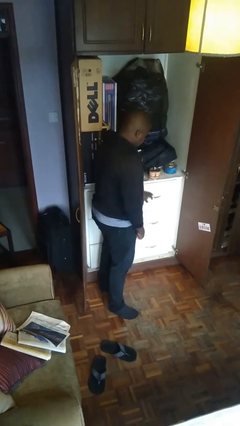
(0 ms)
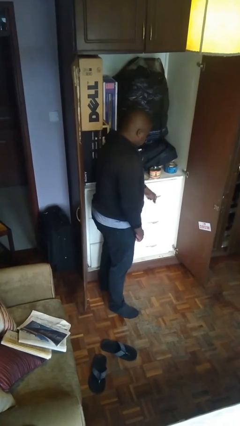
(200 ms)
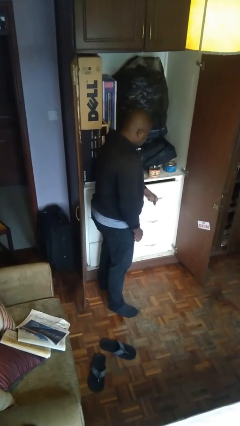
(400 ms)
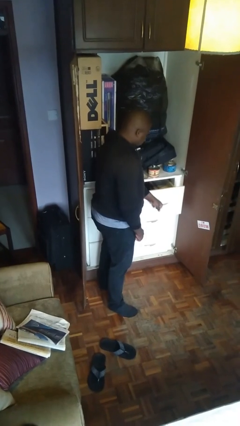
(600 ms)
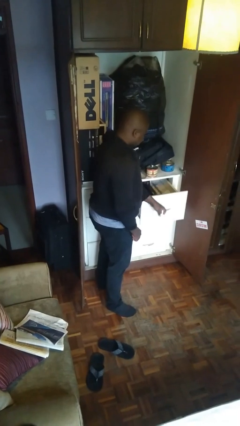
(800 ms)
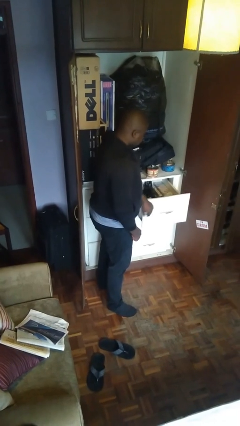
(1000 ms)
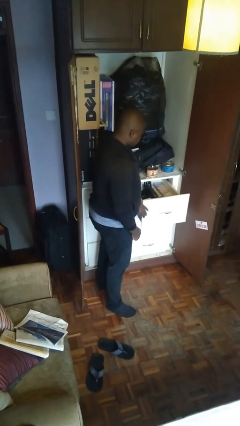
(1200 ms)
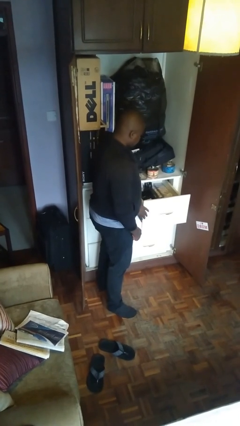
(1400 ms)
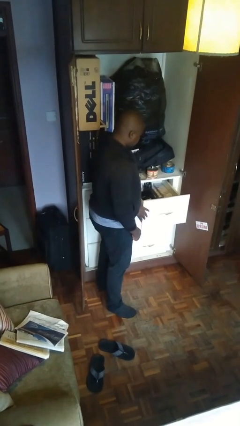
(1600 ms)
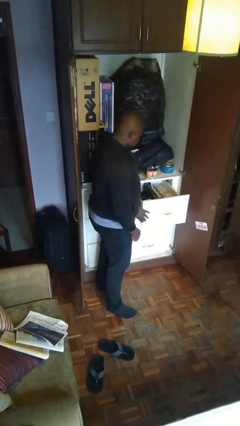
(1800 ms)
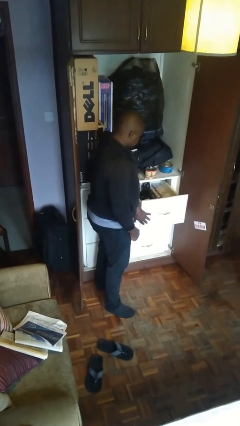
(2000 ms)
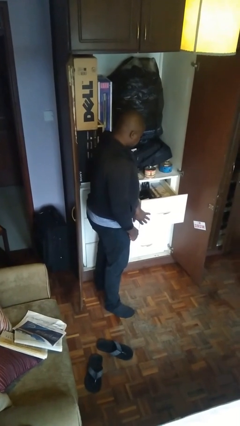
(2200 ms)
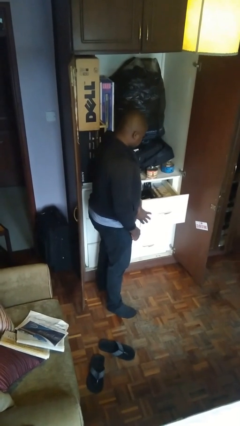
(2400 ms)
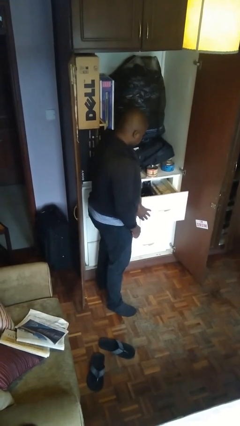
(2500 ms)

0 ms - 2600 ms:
person opens dresser drawer

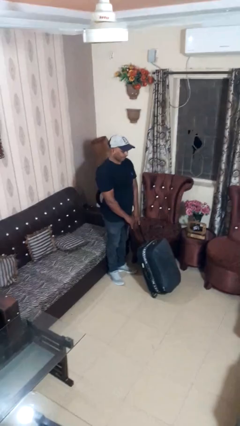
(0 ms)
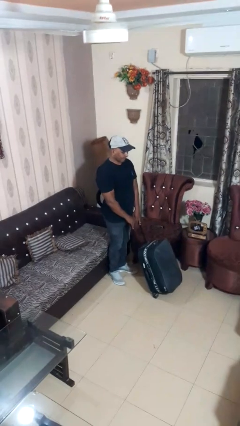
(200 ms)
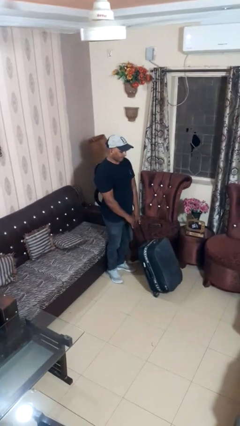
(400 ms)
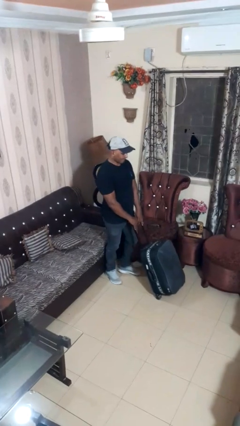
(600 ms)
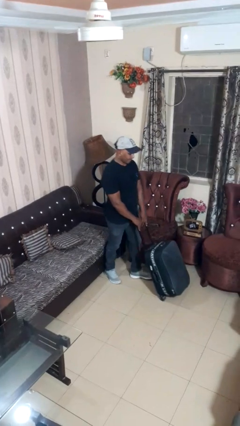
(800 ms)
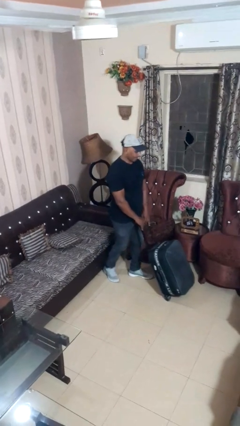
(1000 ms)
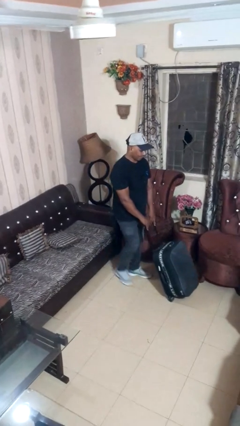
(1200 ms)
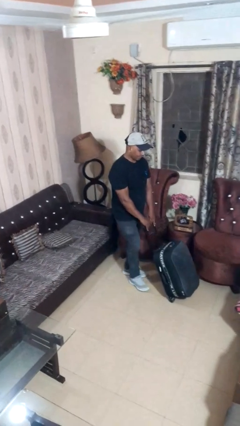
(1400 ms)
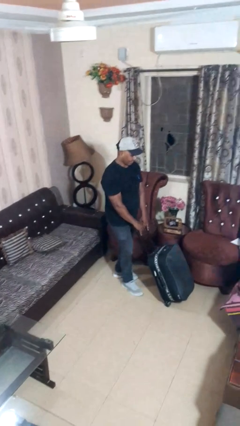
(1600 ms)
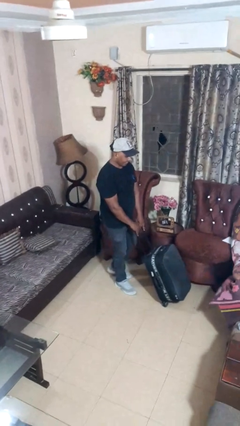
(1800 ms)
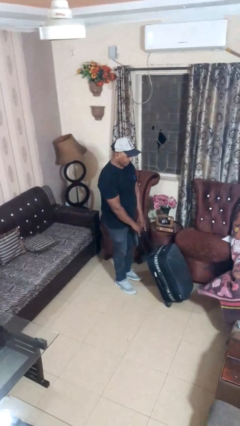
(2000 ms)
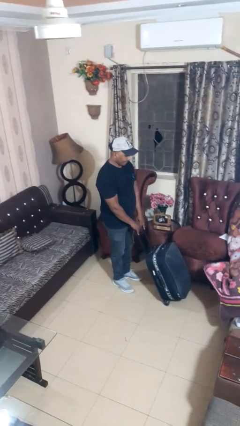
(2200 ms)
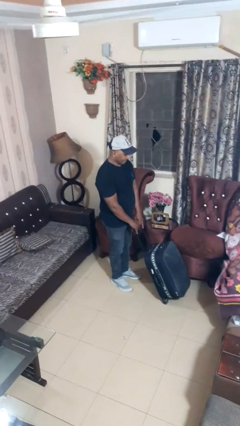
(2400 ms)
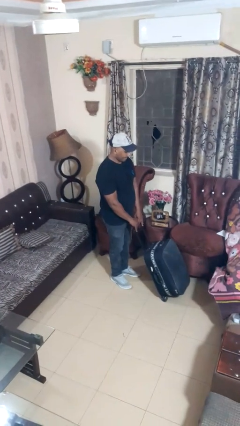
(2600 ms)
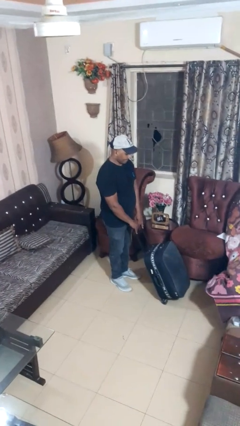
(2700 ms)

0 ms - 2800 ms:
person pushes wheeled cart

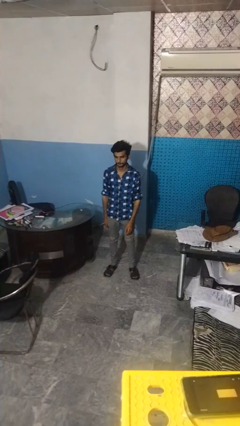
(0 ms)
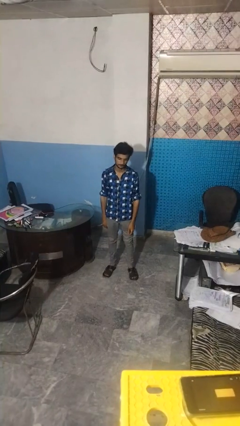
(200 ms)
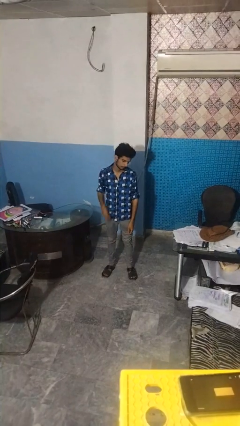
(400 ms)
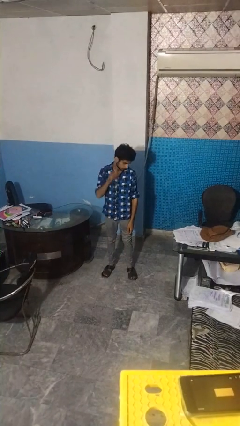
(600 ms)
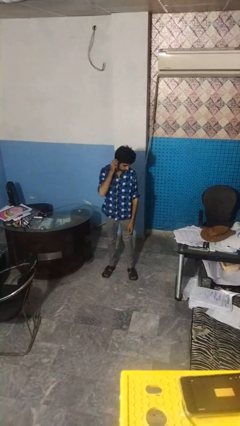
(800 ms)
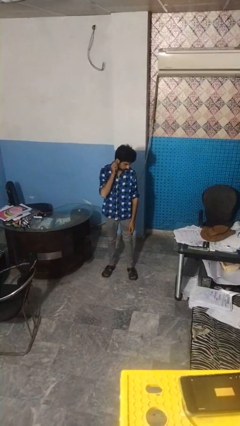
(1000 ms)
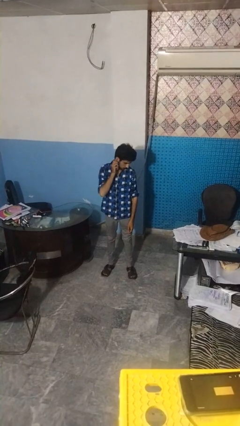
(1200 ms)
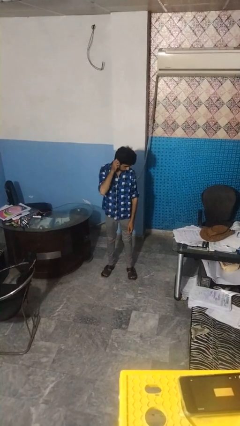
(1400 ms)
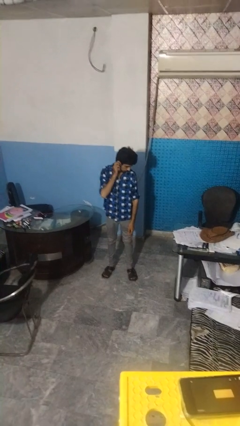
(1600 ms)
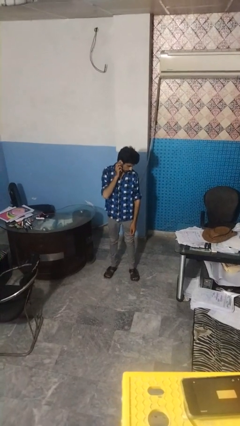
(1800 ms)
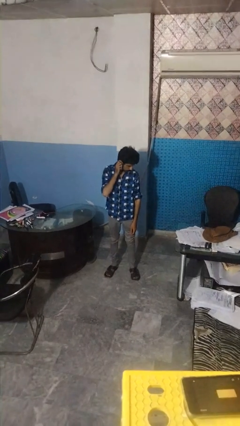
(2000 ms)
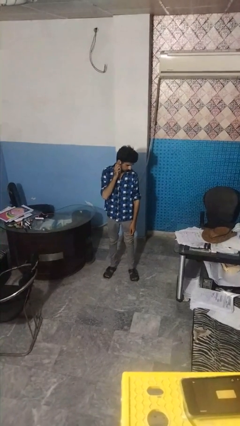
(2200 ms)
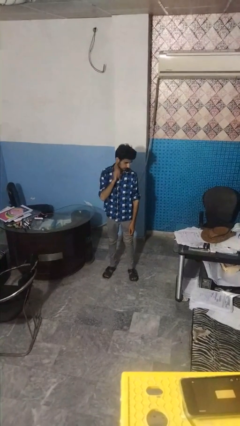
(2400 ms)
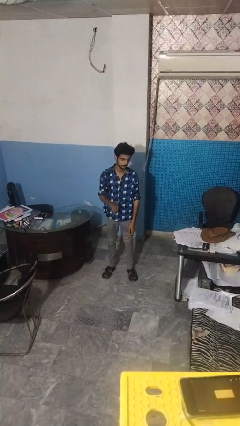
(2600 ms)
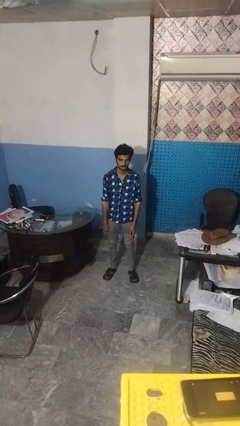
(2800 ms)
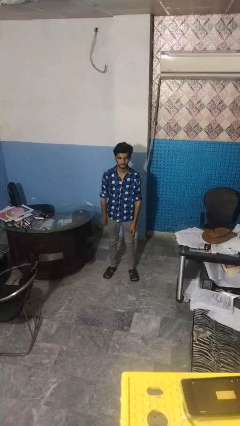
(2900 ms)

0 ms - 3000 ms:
person touches earlobe

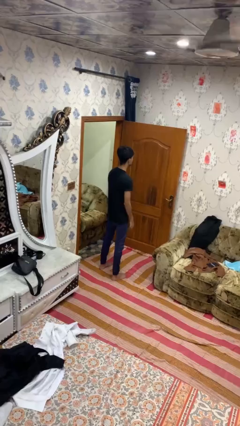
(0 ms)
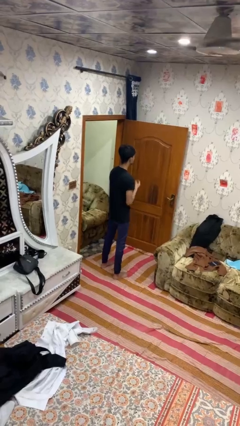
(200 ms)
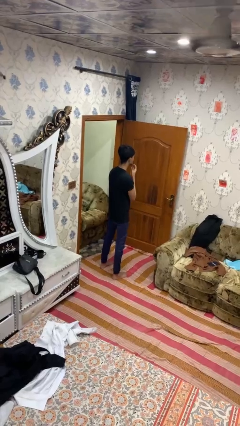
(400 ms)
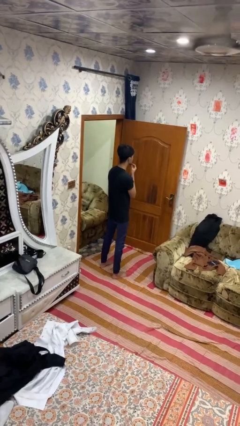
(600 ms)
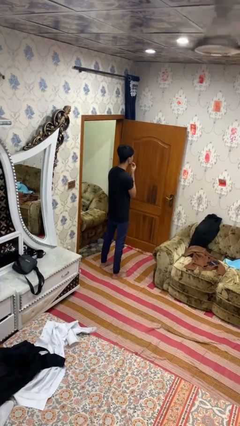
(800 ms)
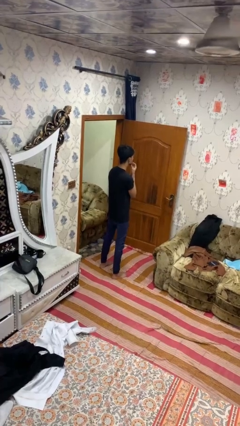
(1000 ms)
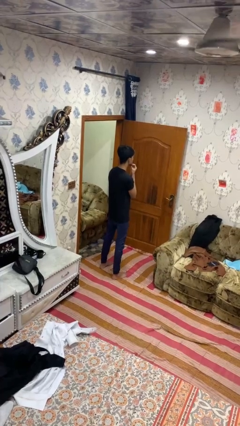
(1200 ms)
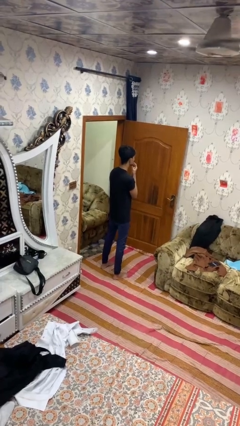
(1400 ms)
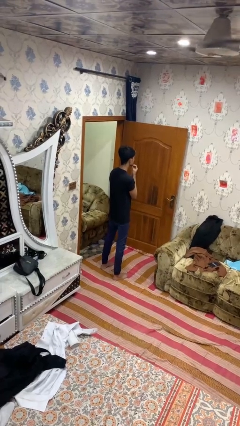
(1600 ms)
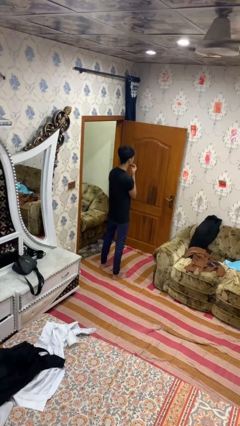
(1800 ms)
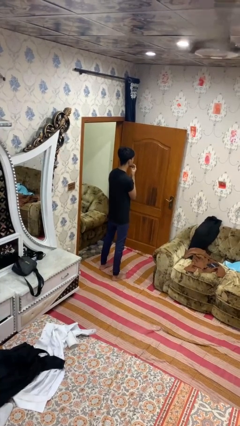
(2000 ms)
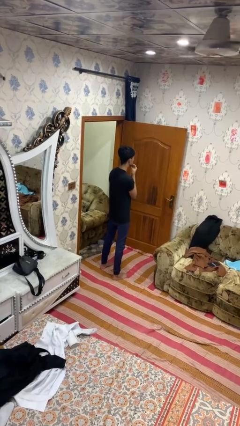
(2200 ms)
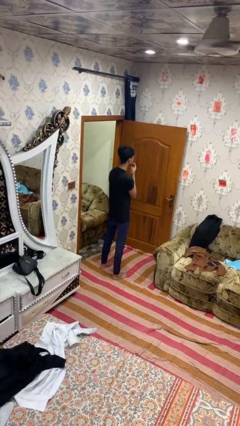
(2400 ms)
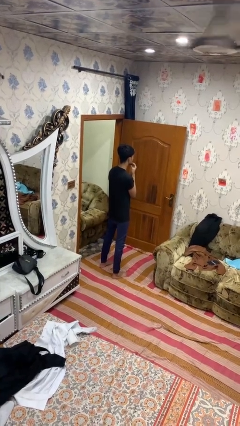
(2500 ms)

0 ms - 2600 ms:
person strokes chin

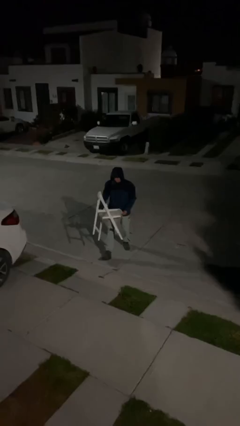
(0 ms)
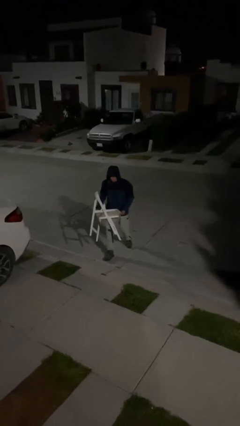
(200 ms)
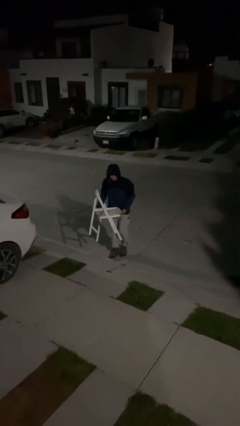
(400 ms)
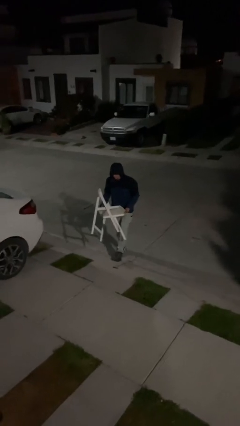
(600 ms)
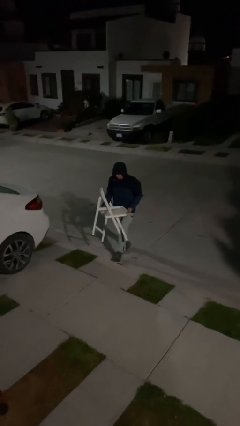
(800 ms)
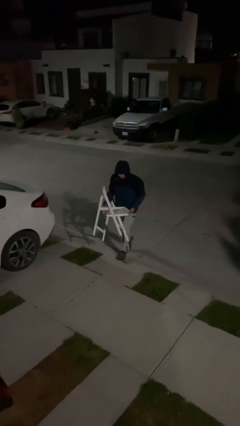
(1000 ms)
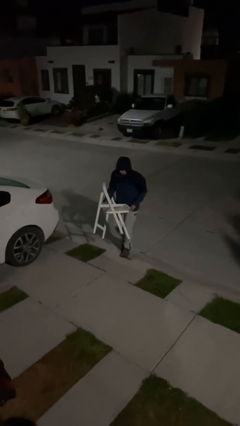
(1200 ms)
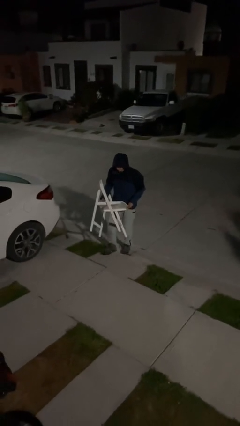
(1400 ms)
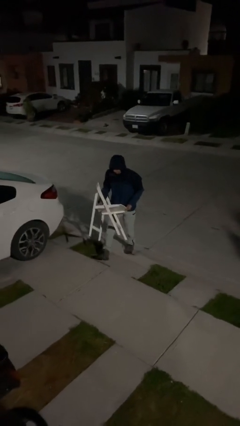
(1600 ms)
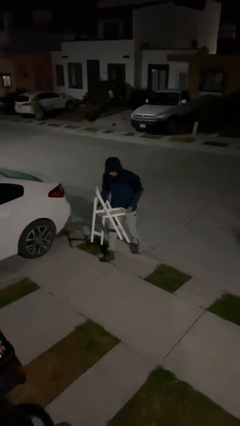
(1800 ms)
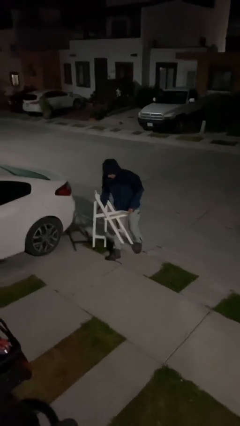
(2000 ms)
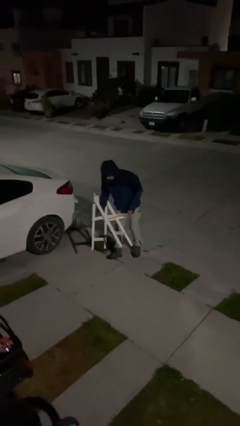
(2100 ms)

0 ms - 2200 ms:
person carries heavy object

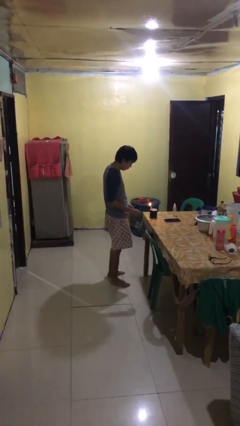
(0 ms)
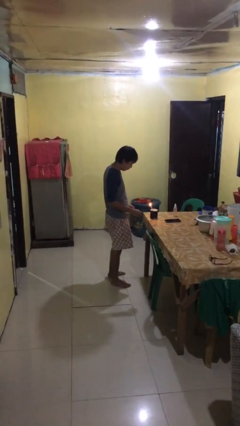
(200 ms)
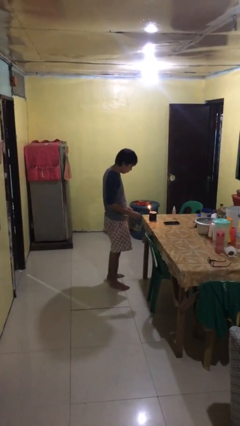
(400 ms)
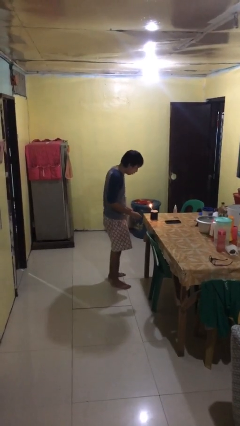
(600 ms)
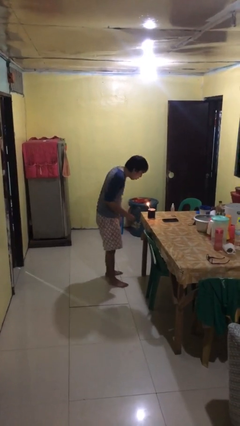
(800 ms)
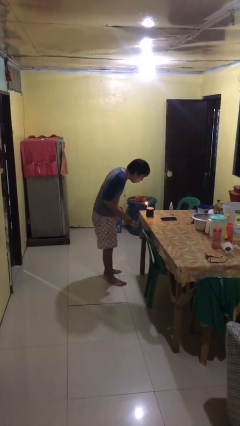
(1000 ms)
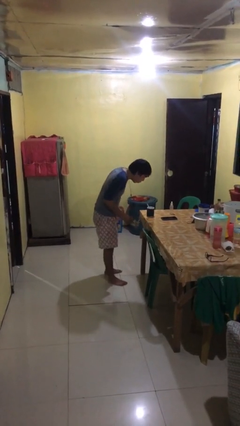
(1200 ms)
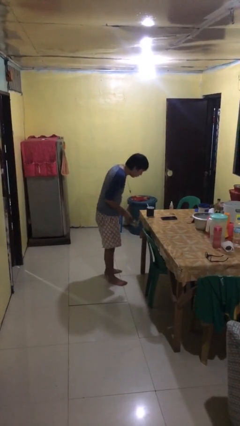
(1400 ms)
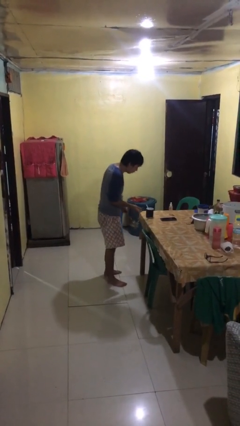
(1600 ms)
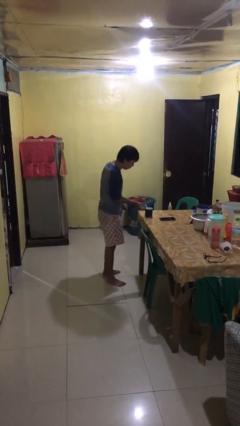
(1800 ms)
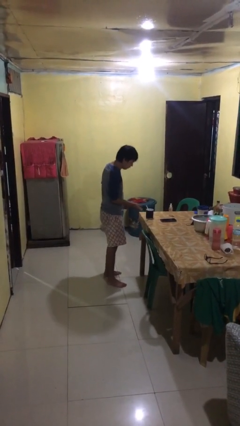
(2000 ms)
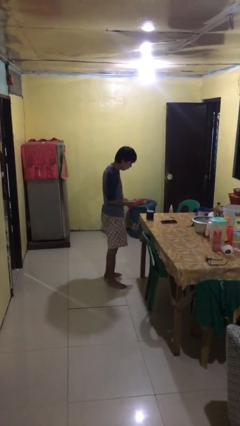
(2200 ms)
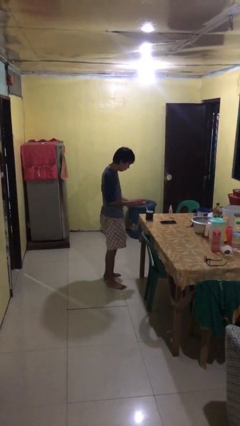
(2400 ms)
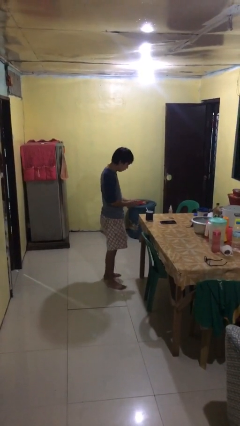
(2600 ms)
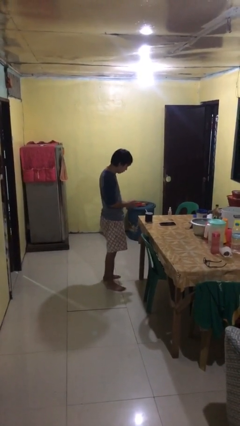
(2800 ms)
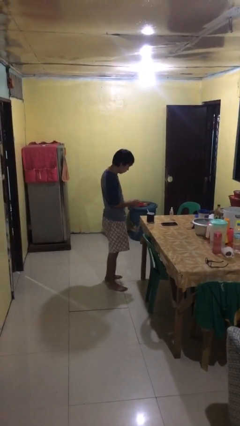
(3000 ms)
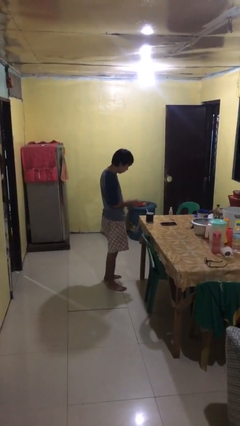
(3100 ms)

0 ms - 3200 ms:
person extinguishes candle

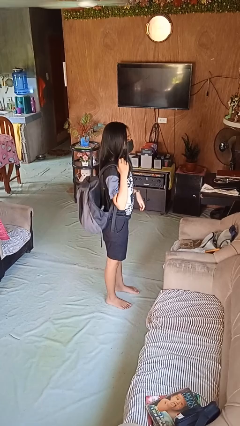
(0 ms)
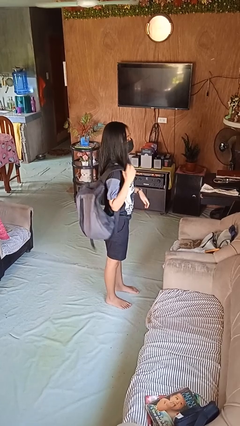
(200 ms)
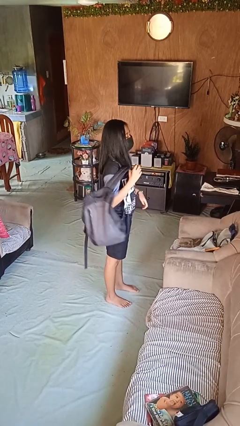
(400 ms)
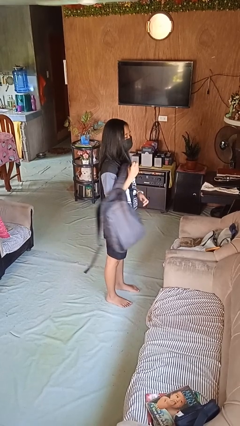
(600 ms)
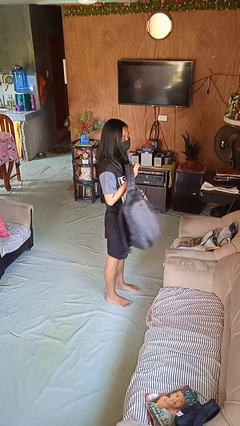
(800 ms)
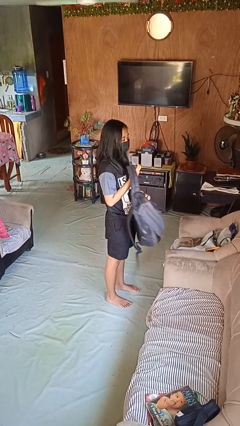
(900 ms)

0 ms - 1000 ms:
person takes off backpack
